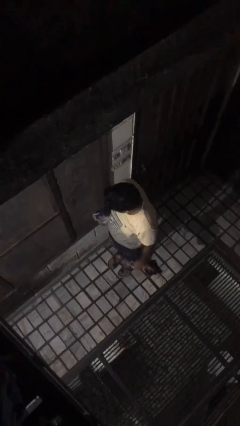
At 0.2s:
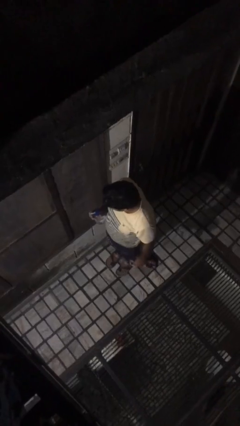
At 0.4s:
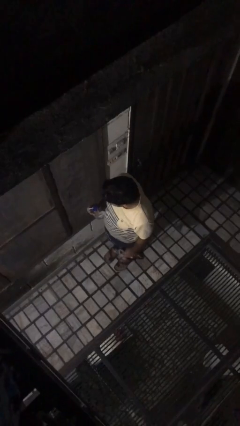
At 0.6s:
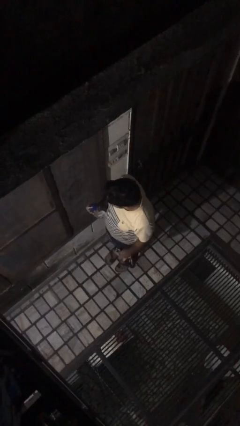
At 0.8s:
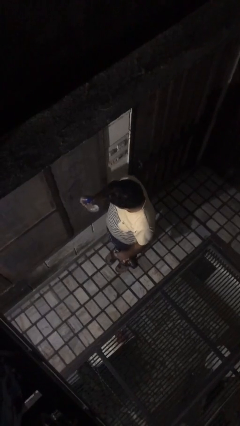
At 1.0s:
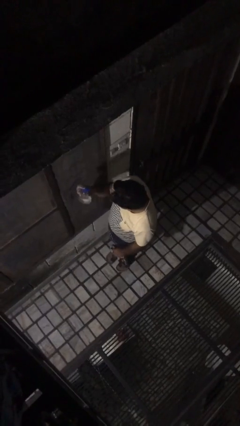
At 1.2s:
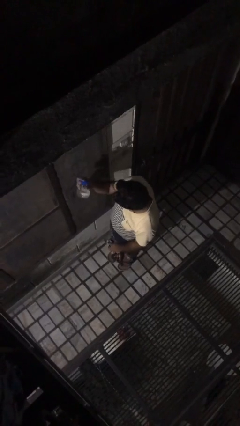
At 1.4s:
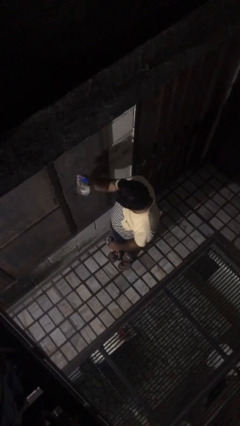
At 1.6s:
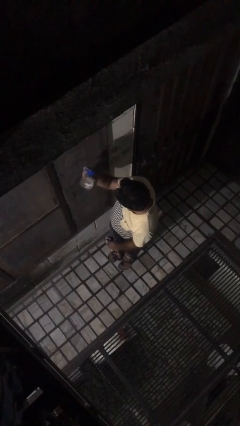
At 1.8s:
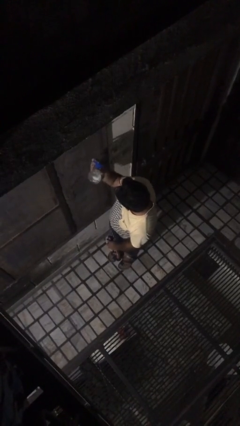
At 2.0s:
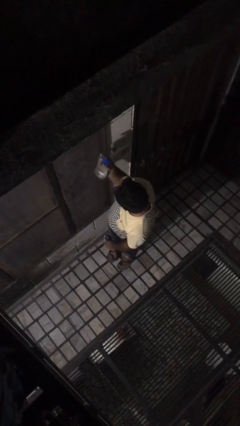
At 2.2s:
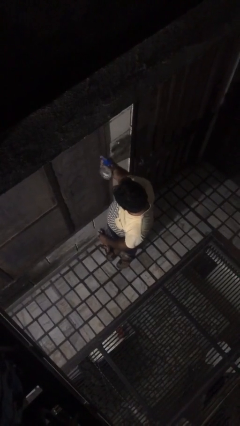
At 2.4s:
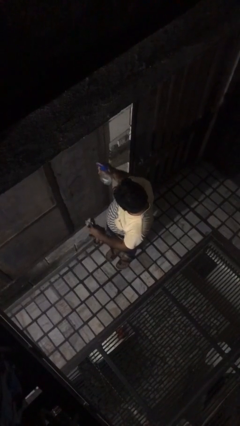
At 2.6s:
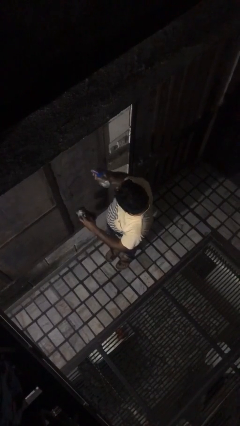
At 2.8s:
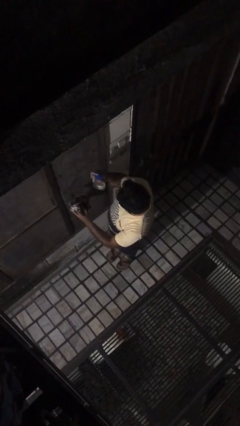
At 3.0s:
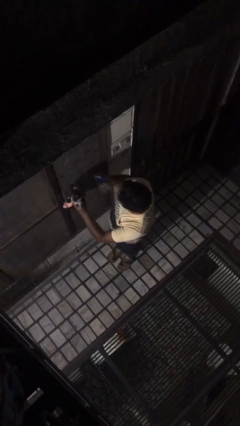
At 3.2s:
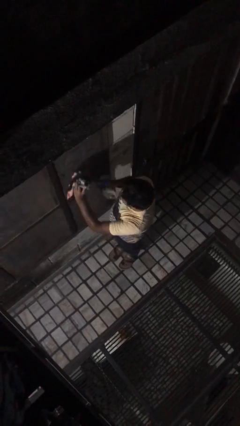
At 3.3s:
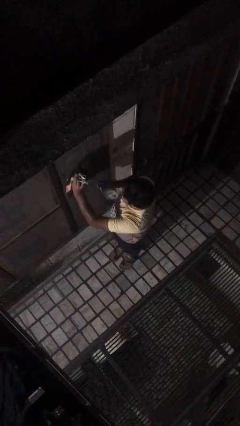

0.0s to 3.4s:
person sprays from bottle

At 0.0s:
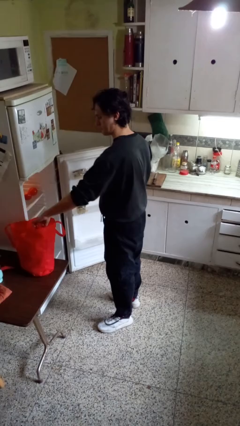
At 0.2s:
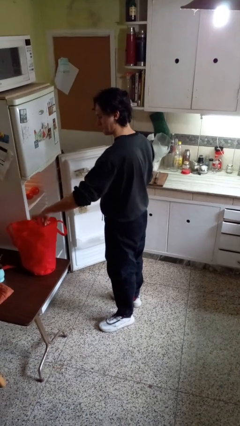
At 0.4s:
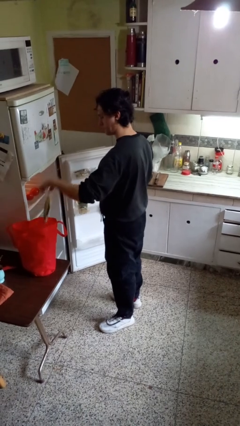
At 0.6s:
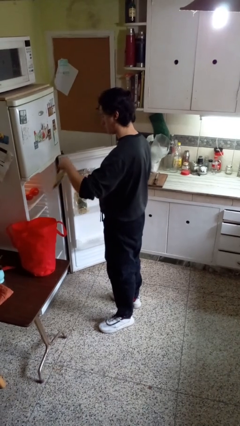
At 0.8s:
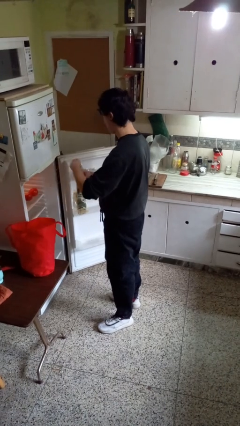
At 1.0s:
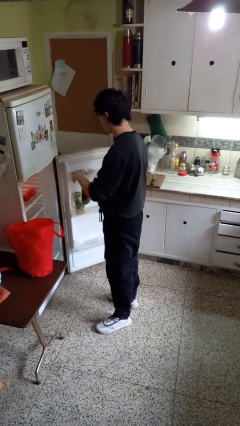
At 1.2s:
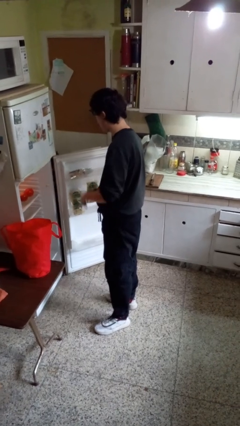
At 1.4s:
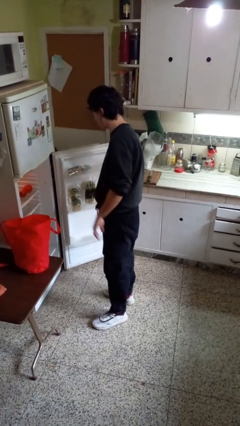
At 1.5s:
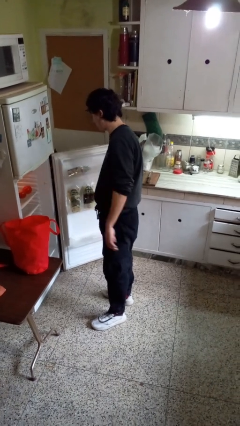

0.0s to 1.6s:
person loads groceries into refrigerator

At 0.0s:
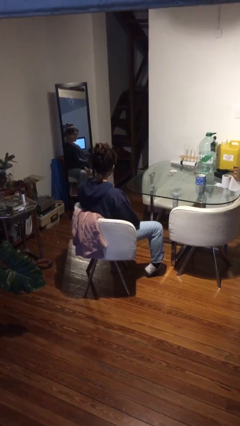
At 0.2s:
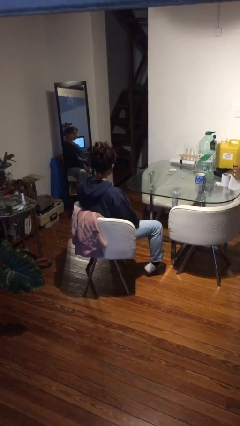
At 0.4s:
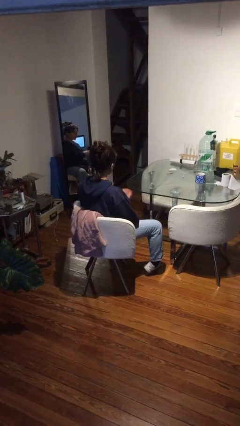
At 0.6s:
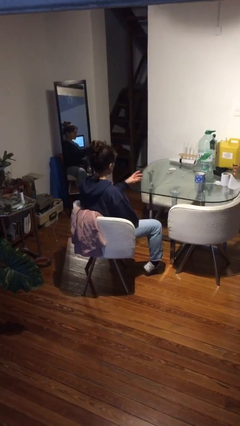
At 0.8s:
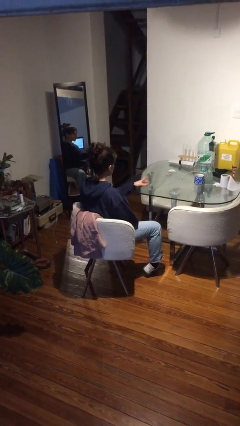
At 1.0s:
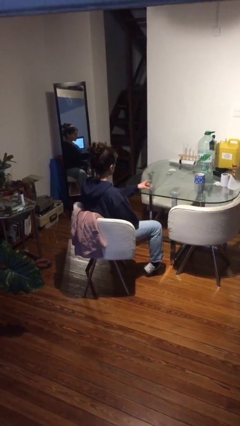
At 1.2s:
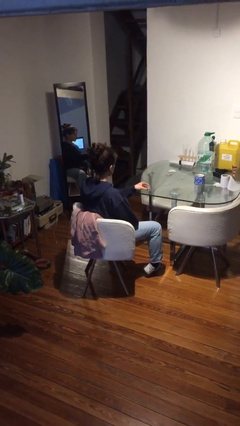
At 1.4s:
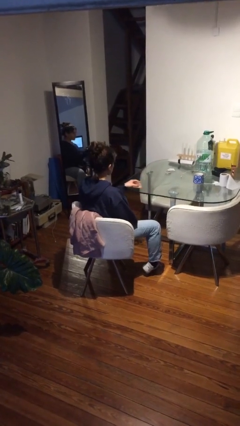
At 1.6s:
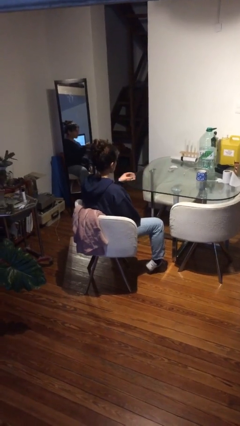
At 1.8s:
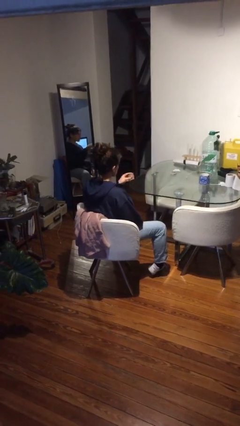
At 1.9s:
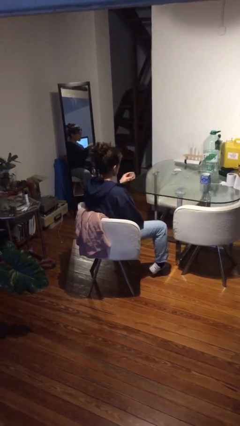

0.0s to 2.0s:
person picks up object from table

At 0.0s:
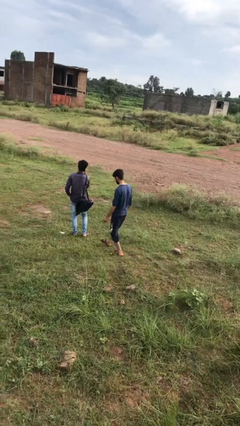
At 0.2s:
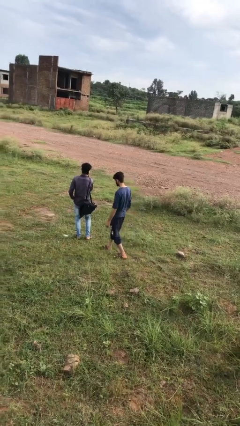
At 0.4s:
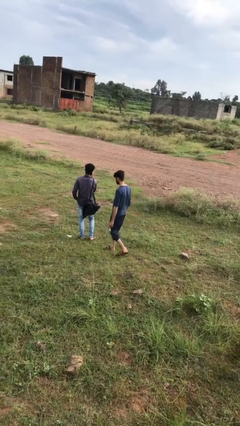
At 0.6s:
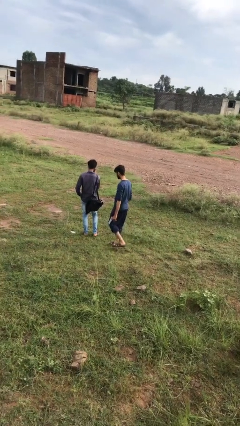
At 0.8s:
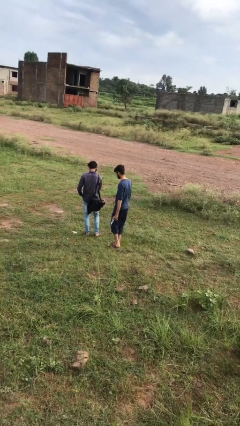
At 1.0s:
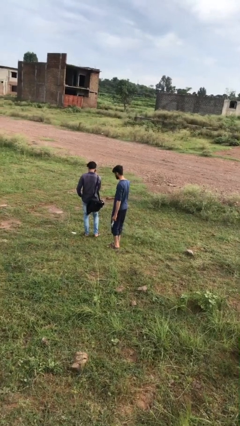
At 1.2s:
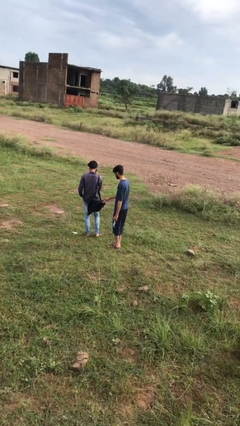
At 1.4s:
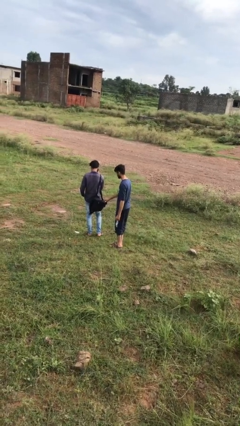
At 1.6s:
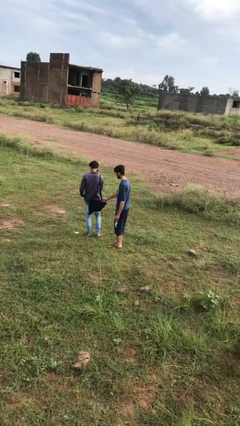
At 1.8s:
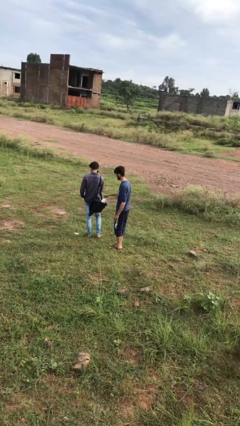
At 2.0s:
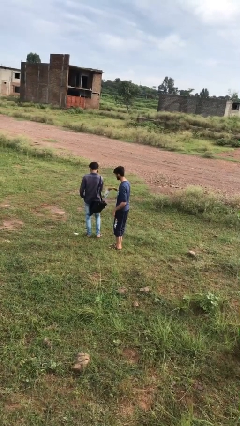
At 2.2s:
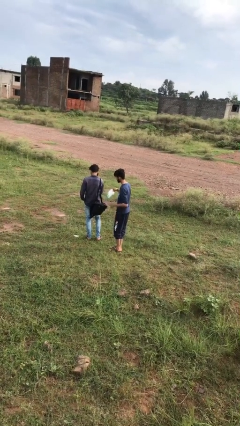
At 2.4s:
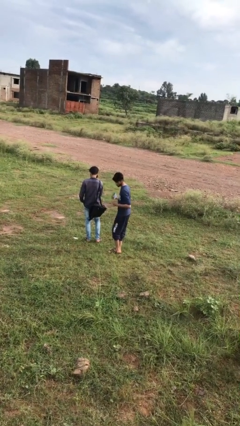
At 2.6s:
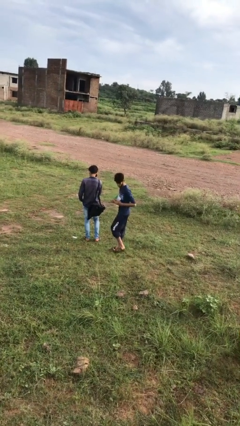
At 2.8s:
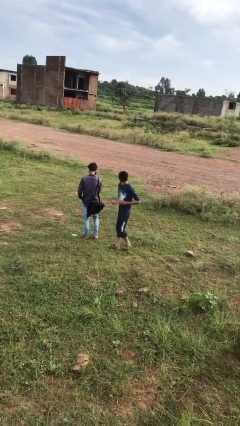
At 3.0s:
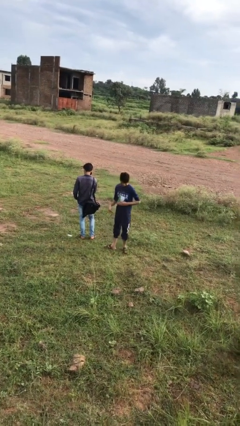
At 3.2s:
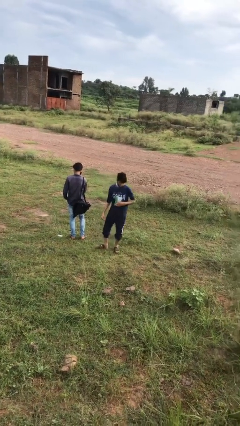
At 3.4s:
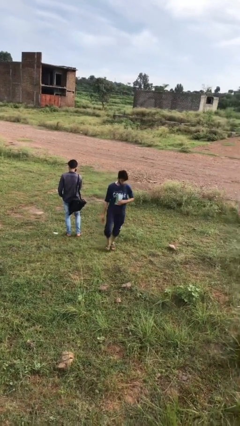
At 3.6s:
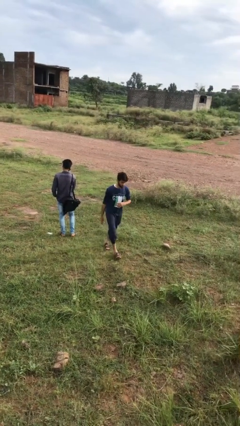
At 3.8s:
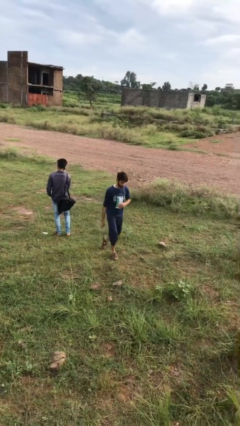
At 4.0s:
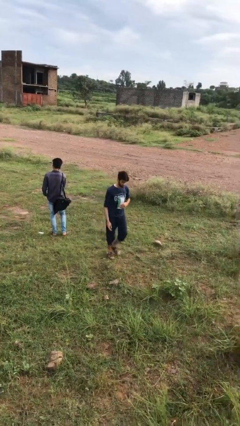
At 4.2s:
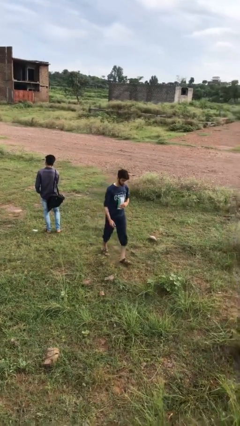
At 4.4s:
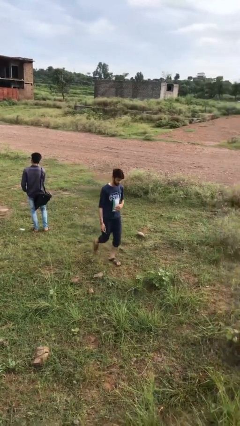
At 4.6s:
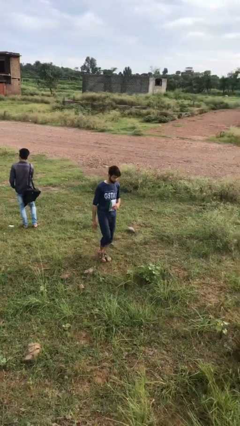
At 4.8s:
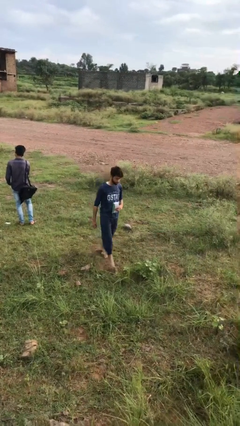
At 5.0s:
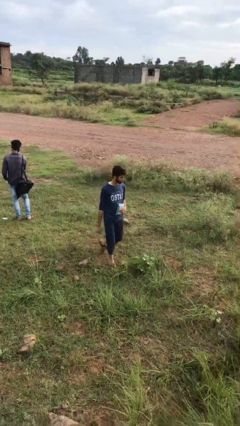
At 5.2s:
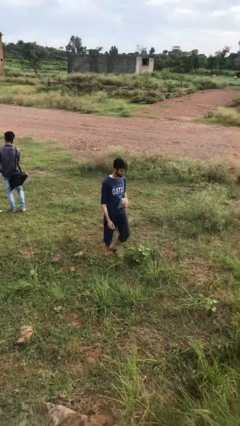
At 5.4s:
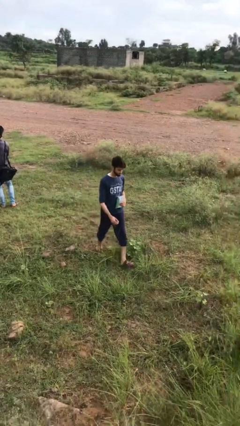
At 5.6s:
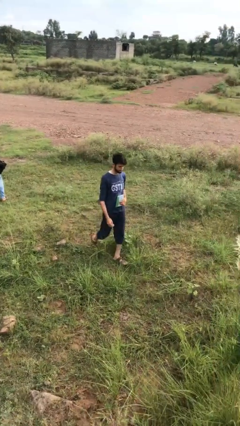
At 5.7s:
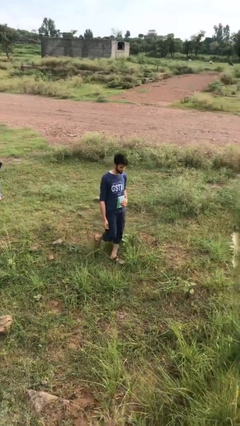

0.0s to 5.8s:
person steals object from person

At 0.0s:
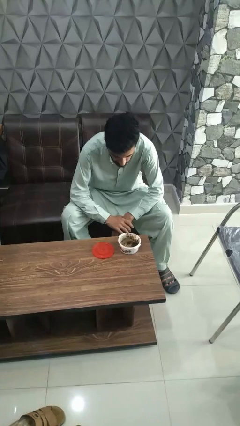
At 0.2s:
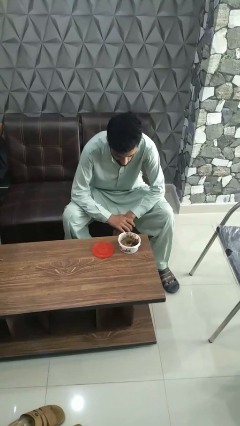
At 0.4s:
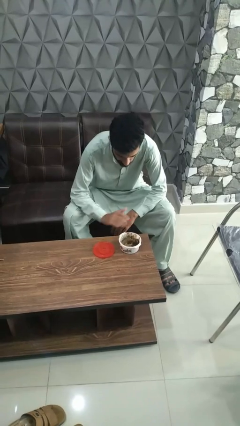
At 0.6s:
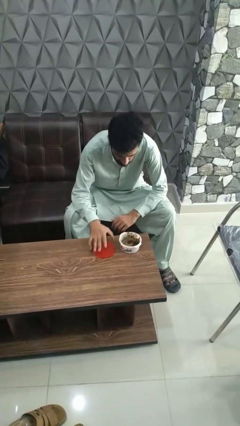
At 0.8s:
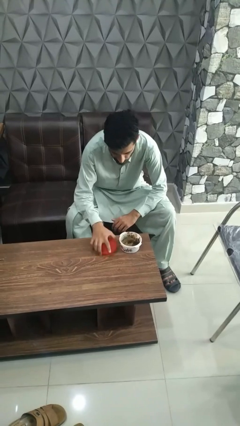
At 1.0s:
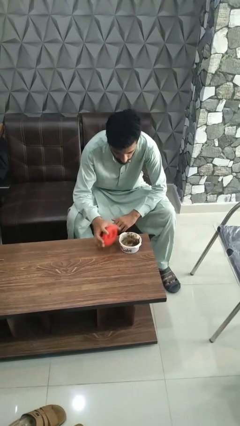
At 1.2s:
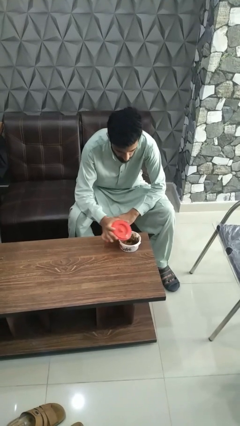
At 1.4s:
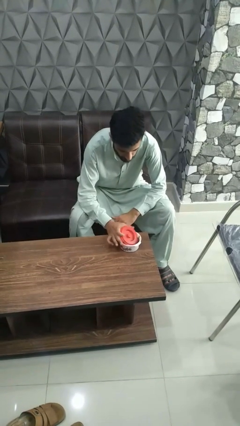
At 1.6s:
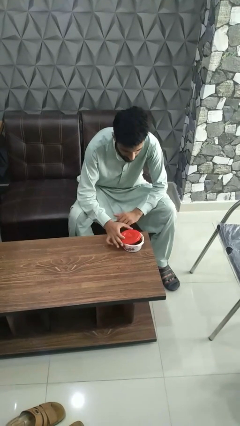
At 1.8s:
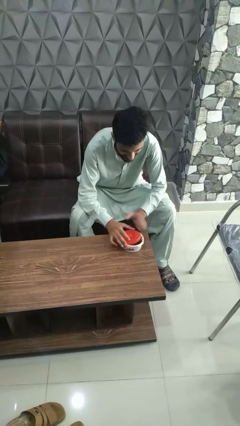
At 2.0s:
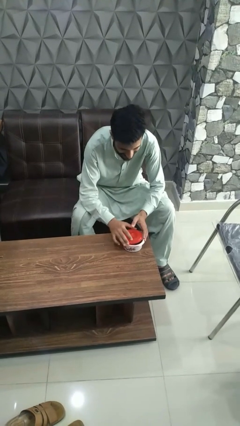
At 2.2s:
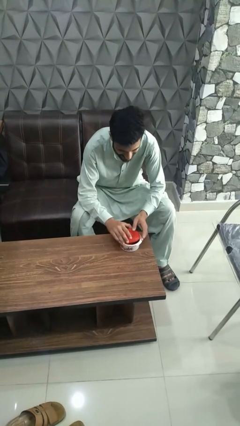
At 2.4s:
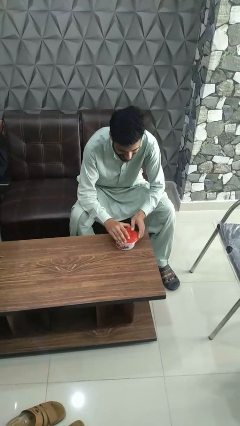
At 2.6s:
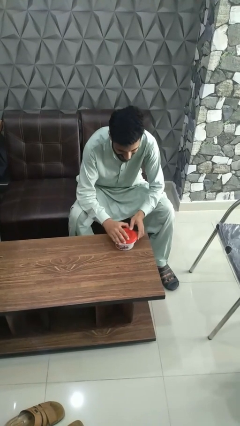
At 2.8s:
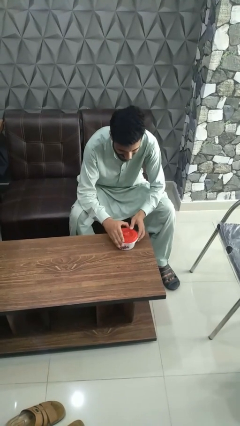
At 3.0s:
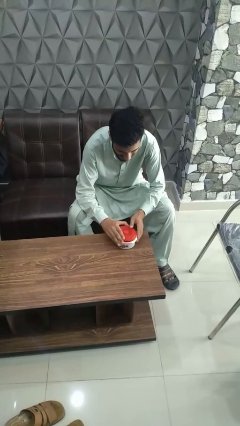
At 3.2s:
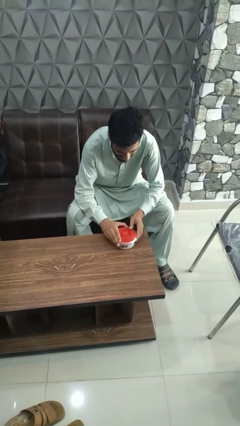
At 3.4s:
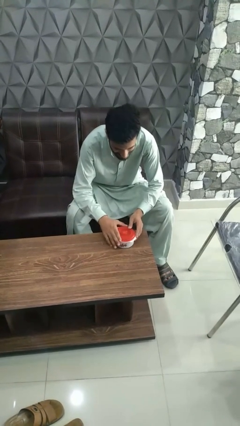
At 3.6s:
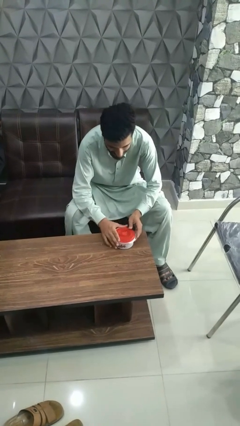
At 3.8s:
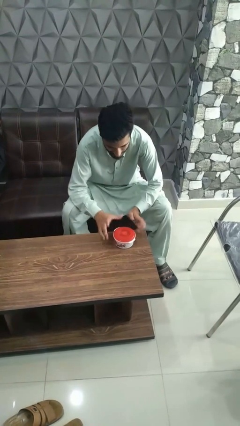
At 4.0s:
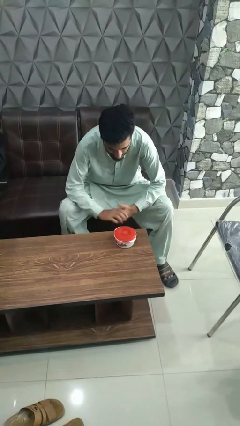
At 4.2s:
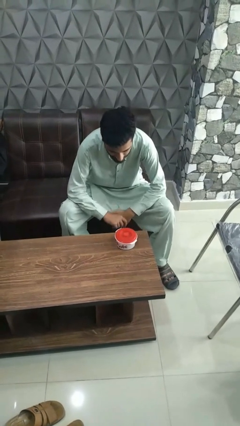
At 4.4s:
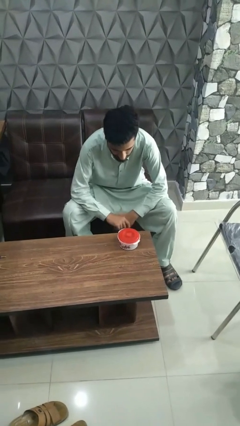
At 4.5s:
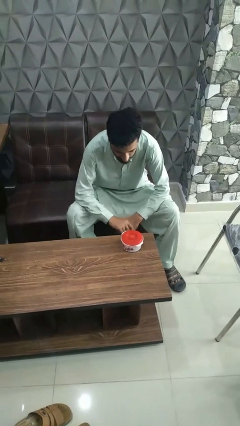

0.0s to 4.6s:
person closes jar

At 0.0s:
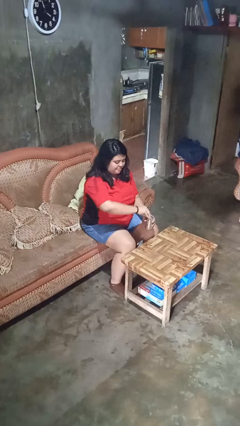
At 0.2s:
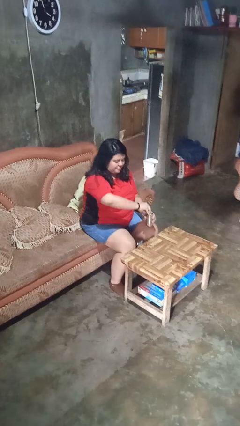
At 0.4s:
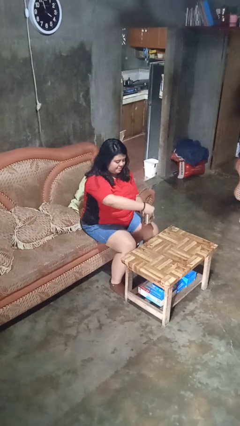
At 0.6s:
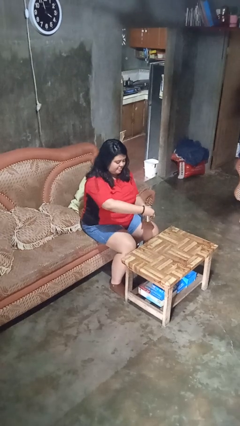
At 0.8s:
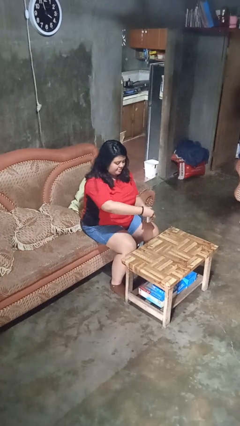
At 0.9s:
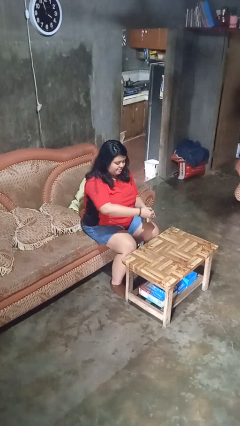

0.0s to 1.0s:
person opens beverage can
